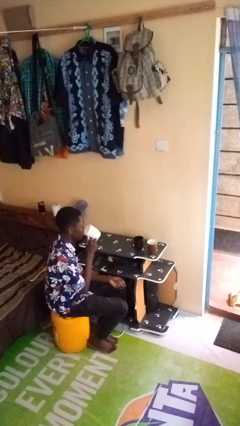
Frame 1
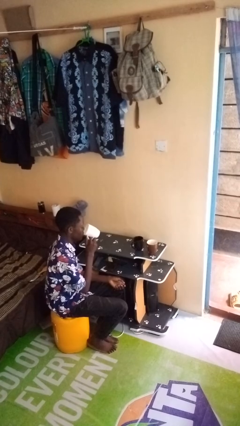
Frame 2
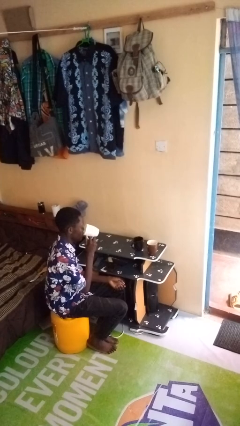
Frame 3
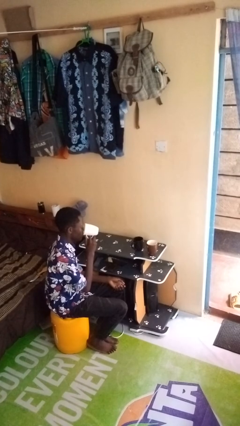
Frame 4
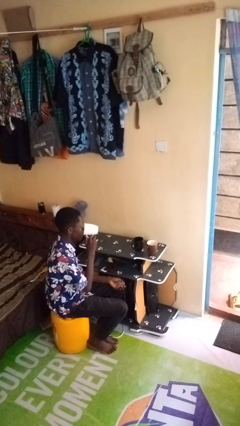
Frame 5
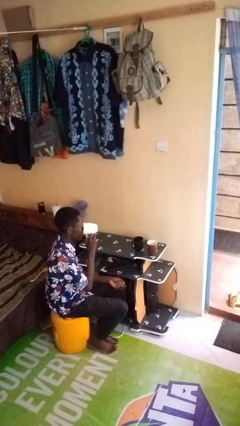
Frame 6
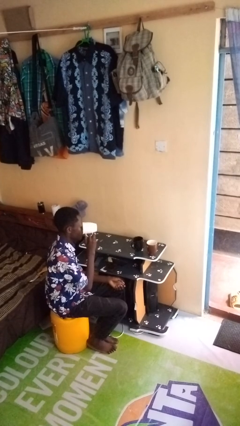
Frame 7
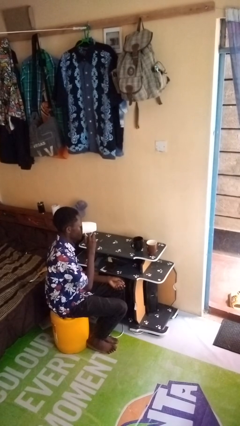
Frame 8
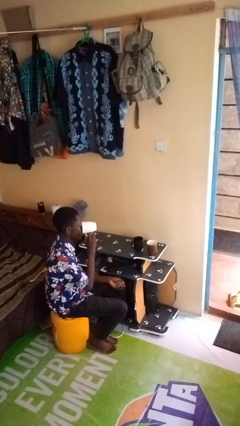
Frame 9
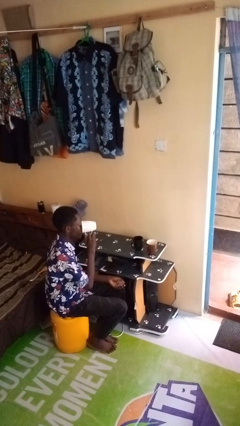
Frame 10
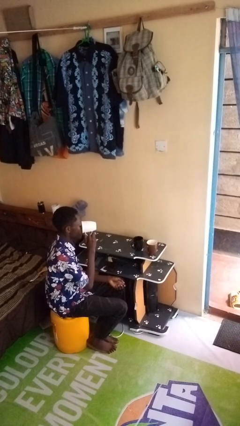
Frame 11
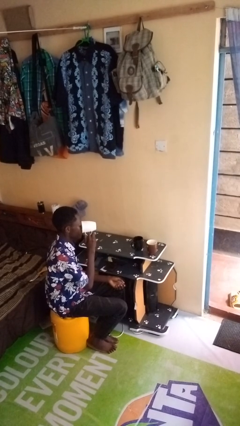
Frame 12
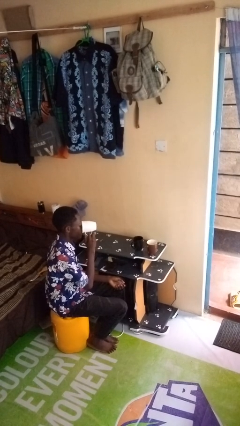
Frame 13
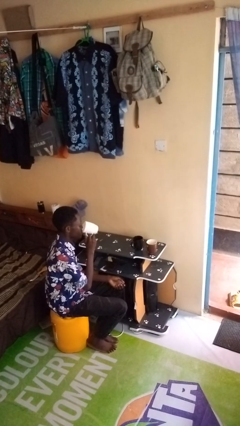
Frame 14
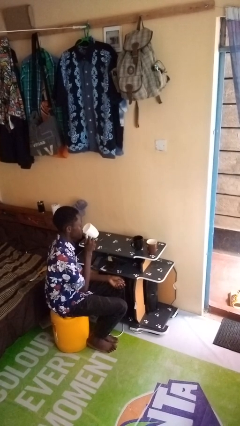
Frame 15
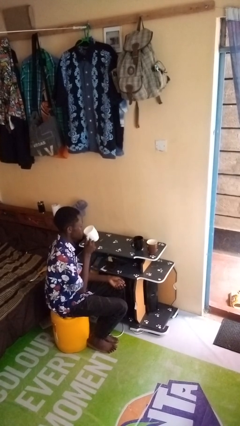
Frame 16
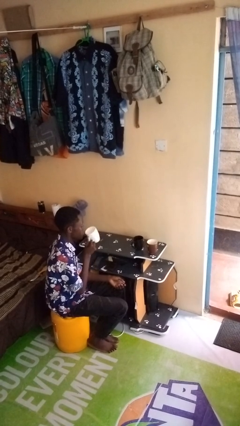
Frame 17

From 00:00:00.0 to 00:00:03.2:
person drinks from shotglass

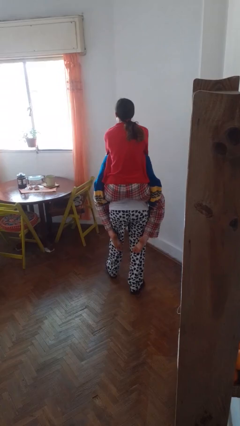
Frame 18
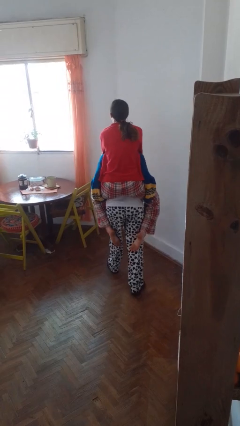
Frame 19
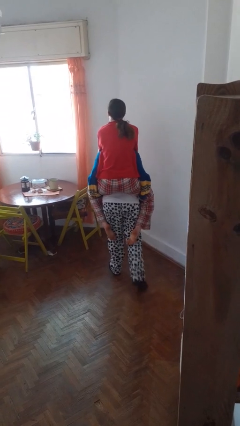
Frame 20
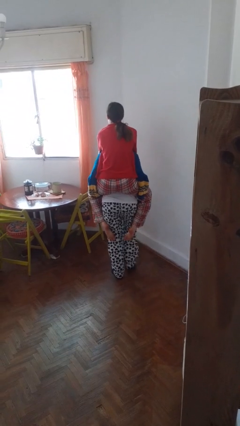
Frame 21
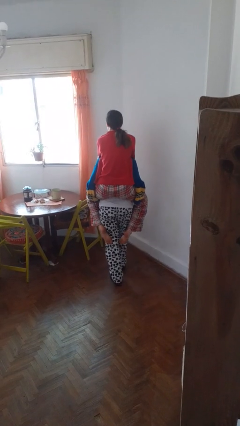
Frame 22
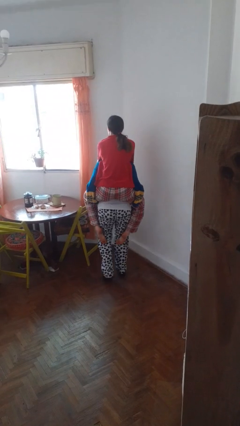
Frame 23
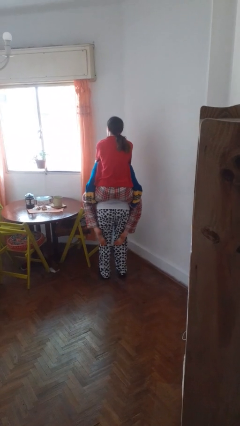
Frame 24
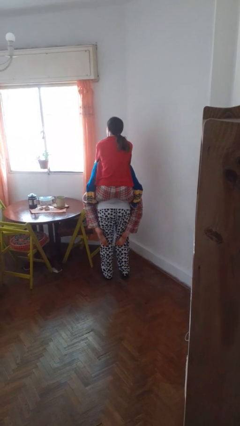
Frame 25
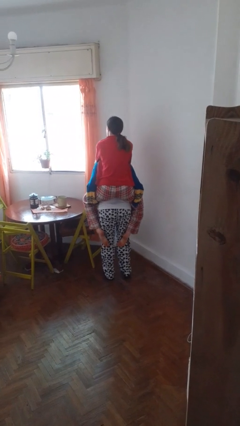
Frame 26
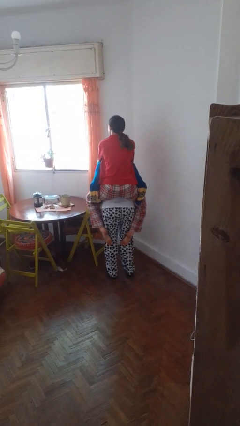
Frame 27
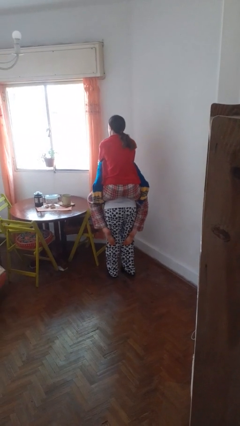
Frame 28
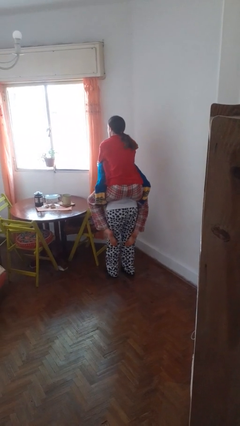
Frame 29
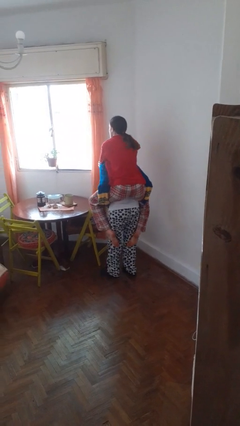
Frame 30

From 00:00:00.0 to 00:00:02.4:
person carries person on back

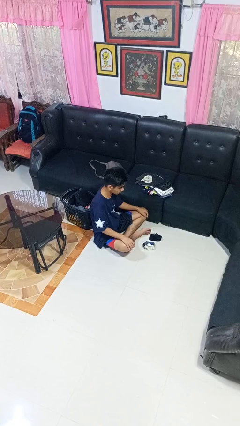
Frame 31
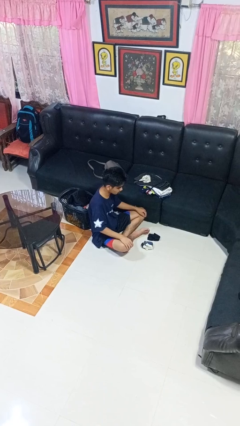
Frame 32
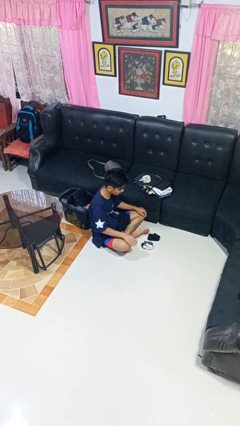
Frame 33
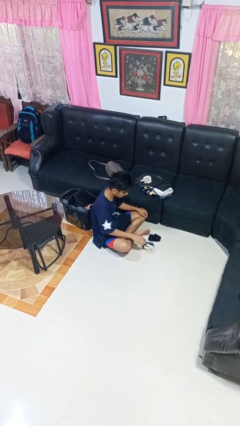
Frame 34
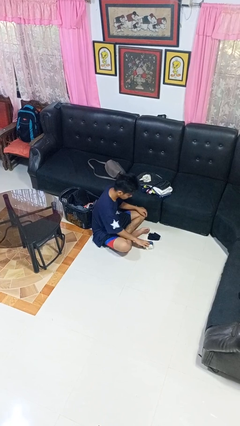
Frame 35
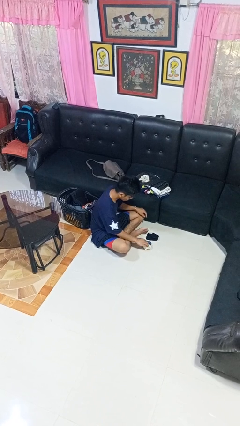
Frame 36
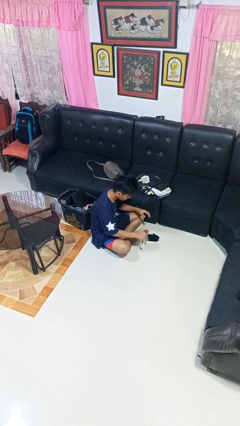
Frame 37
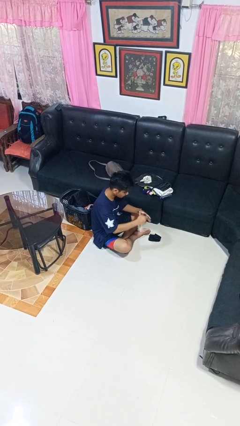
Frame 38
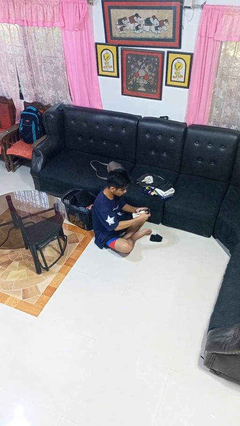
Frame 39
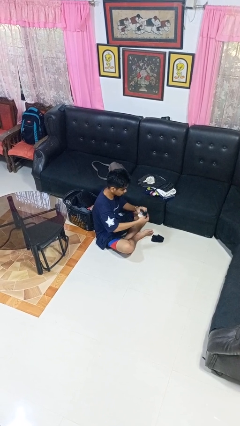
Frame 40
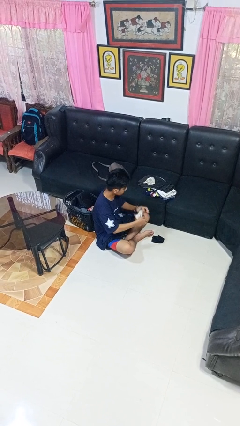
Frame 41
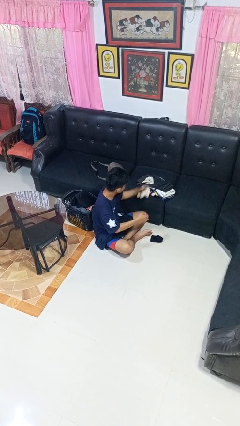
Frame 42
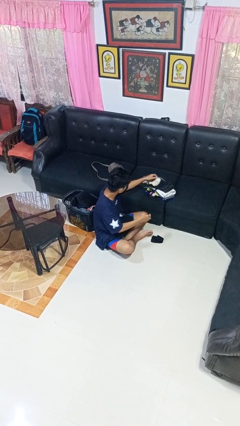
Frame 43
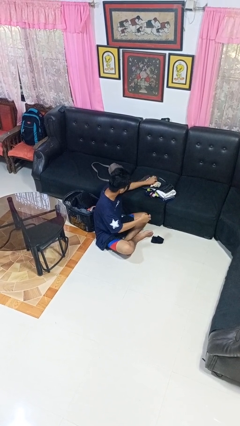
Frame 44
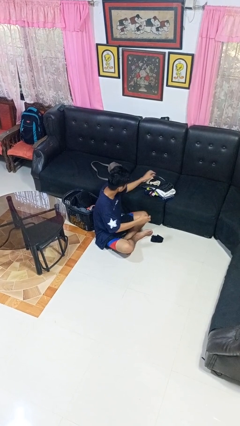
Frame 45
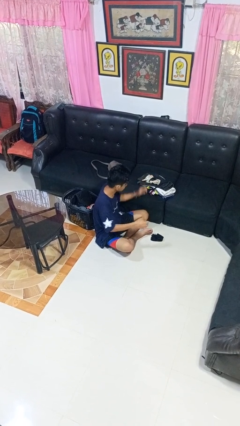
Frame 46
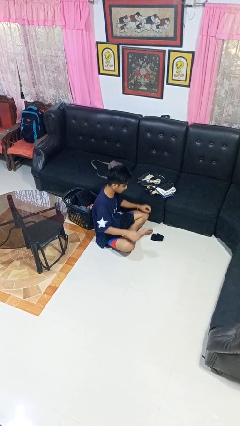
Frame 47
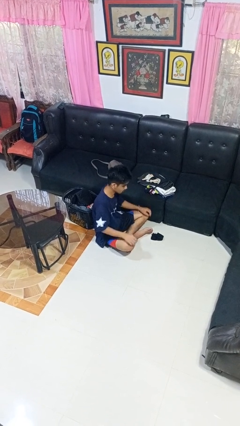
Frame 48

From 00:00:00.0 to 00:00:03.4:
person folds socks

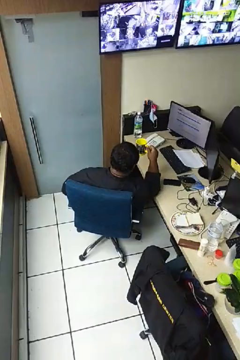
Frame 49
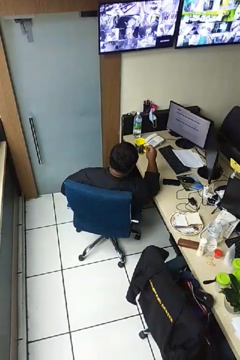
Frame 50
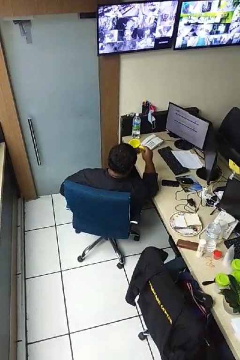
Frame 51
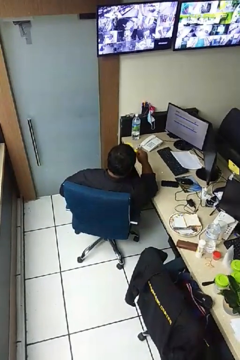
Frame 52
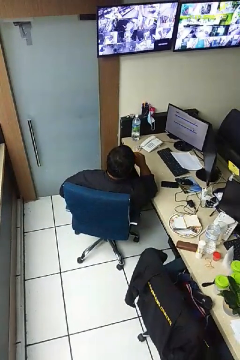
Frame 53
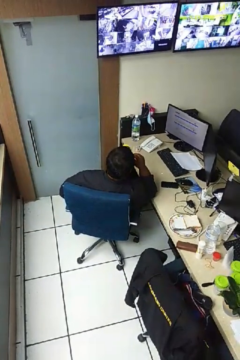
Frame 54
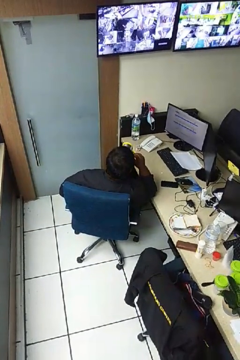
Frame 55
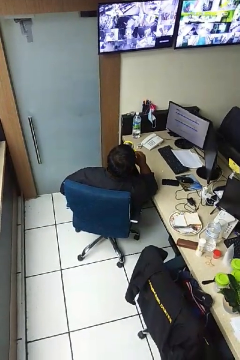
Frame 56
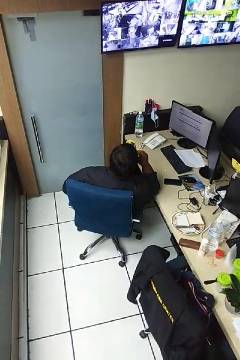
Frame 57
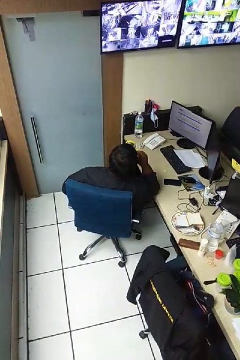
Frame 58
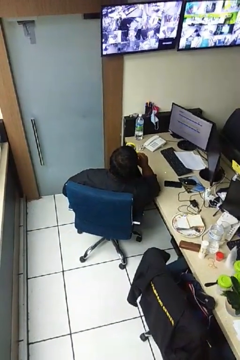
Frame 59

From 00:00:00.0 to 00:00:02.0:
person drinks from mug

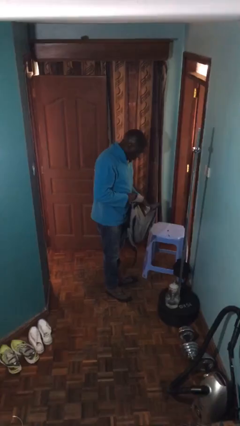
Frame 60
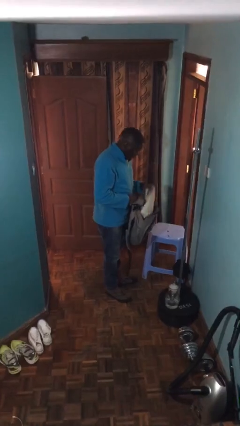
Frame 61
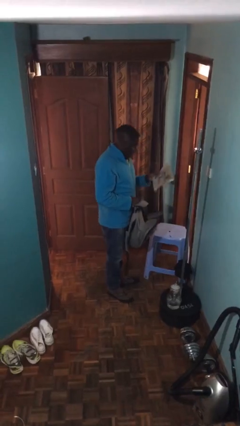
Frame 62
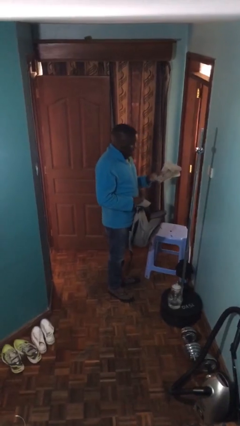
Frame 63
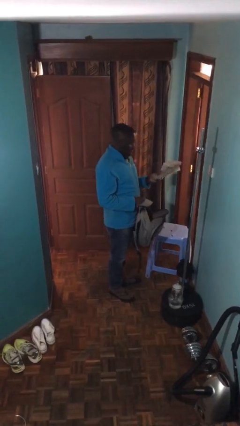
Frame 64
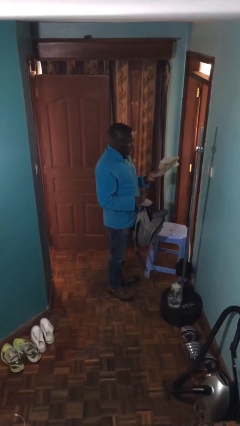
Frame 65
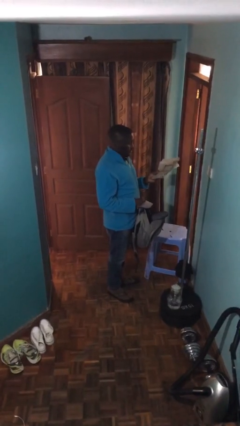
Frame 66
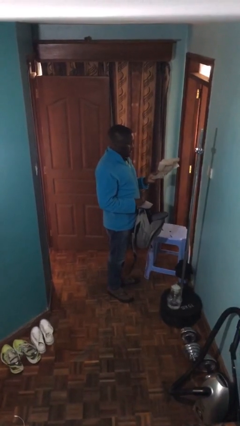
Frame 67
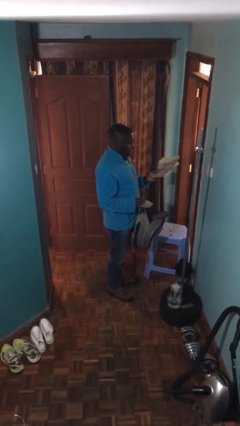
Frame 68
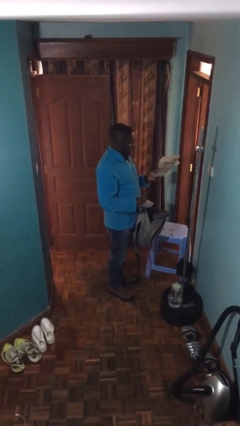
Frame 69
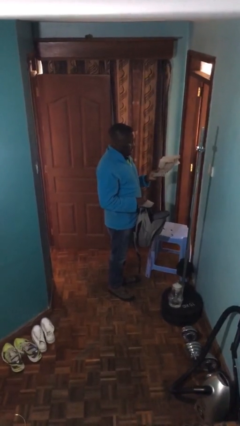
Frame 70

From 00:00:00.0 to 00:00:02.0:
person takes object from backpack

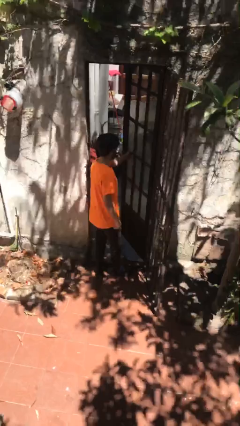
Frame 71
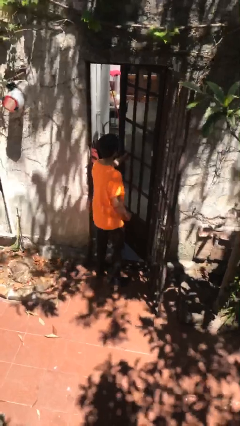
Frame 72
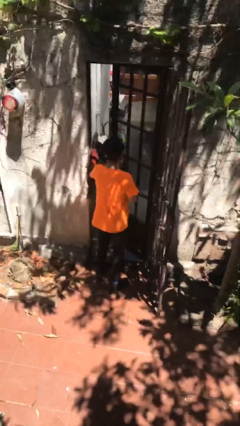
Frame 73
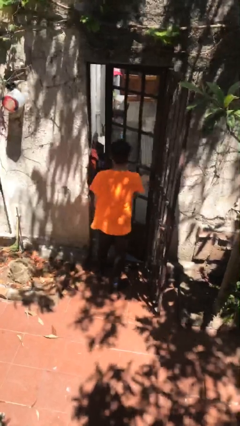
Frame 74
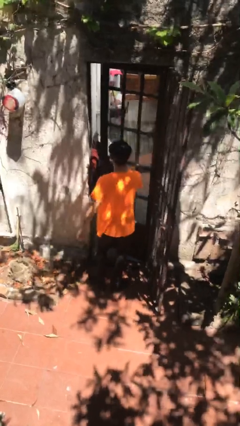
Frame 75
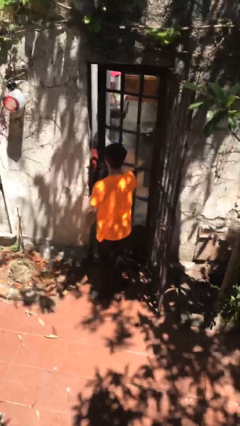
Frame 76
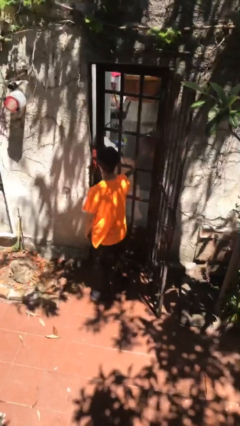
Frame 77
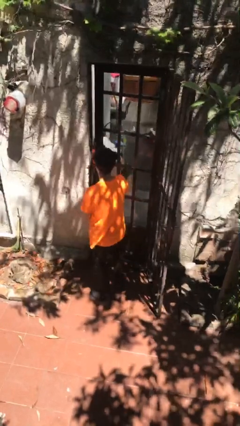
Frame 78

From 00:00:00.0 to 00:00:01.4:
person closes facility door

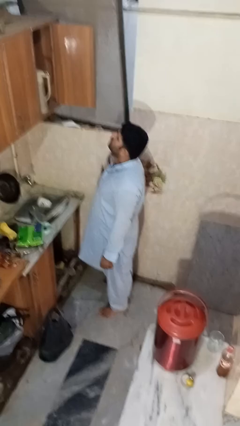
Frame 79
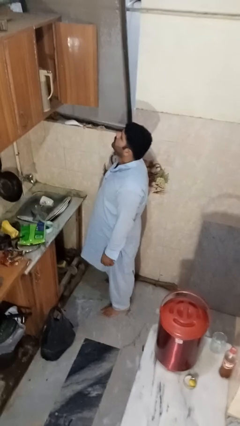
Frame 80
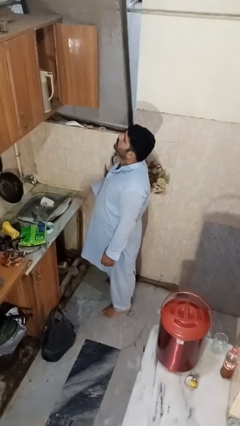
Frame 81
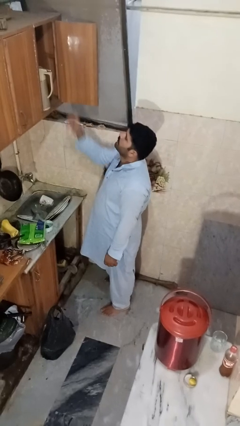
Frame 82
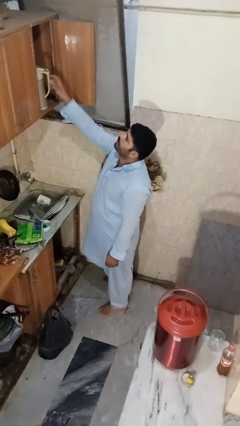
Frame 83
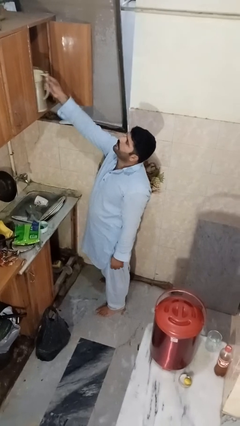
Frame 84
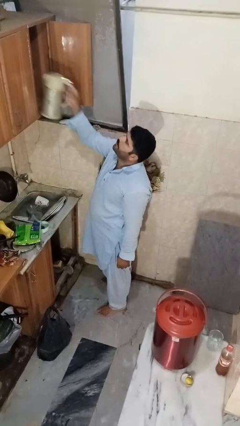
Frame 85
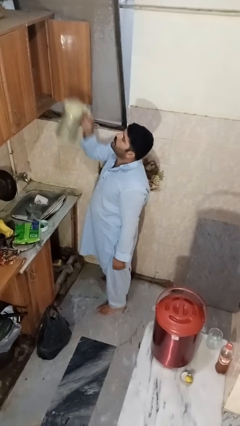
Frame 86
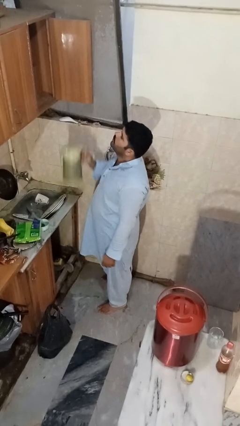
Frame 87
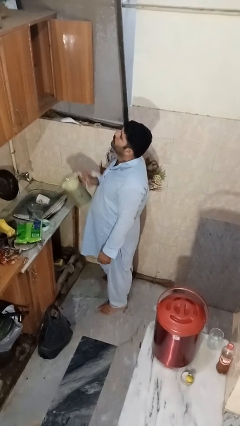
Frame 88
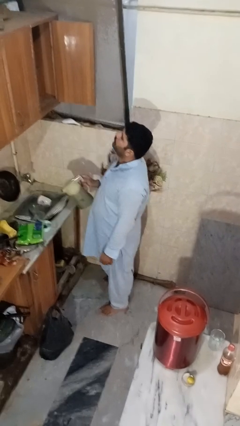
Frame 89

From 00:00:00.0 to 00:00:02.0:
person takes object from cabinet

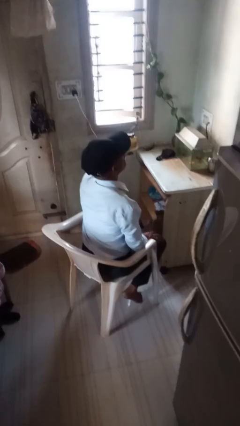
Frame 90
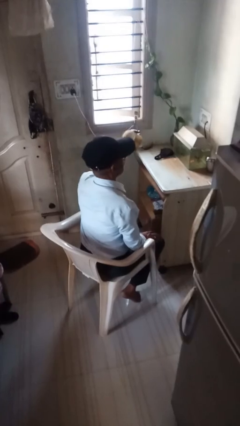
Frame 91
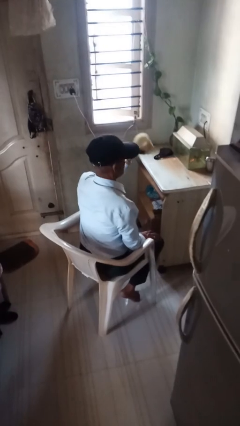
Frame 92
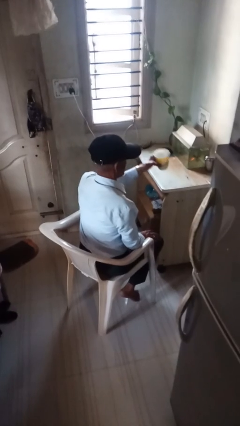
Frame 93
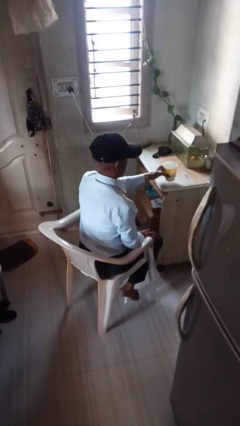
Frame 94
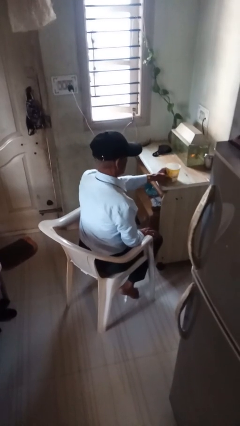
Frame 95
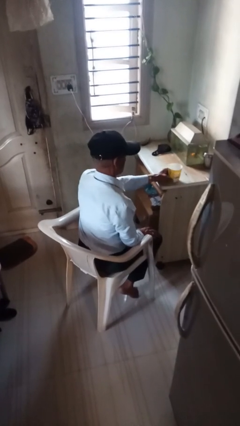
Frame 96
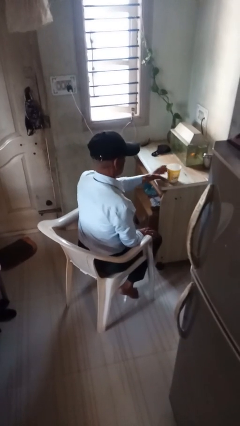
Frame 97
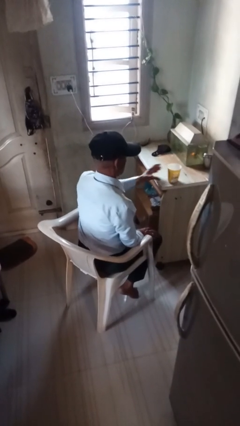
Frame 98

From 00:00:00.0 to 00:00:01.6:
person puts down object on table
